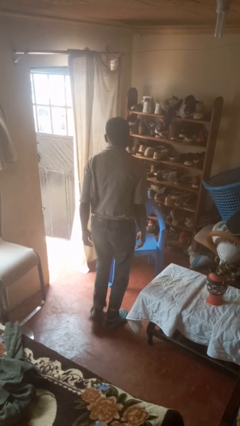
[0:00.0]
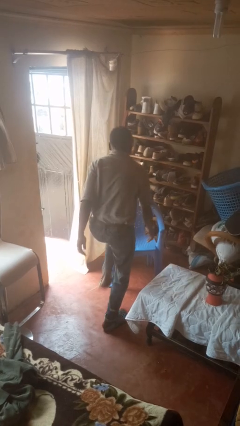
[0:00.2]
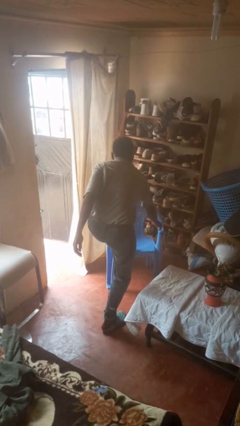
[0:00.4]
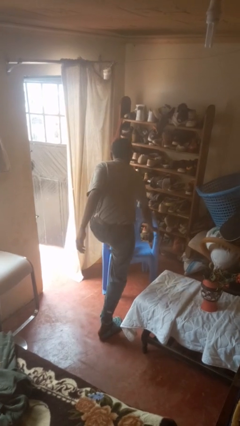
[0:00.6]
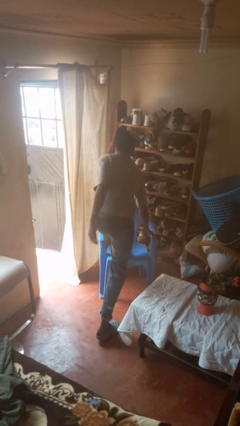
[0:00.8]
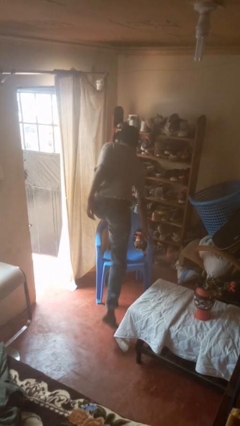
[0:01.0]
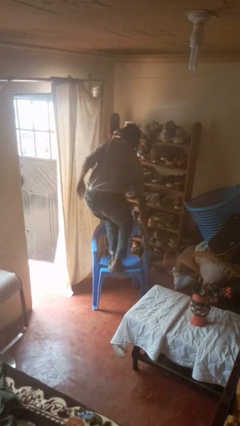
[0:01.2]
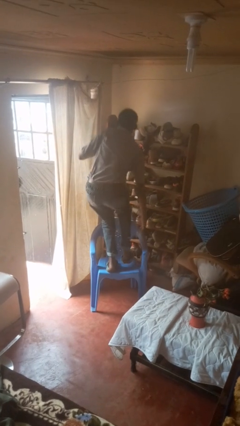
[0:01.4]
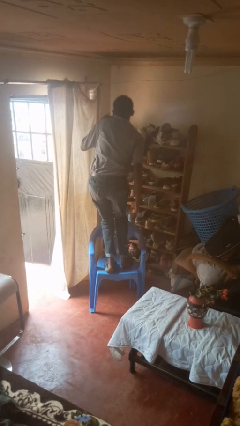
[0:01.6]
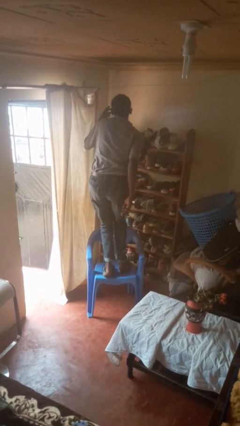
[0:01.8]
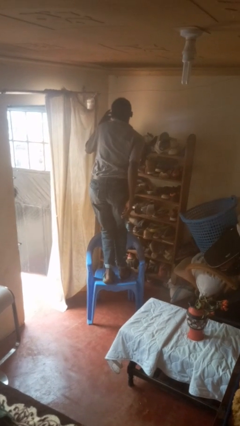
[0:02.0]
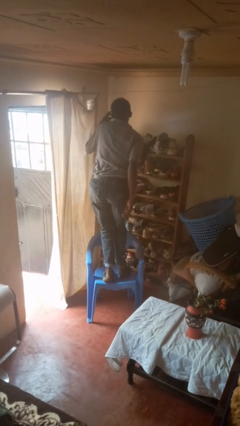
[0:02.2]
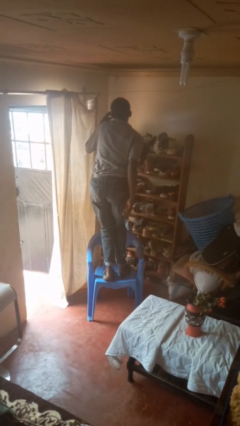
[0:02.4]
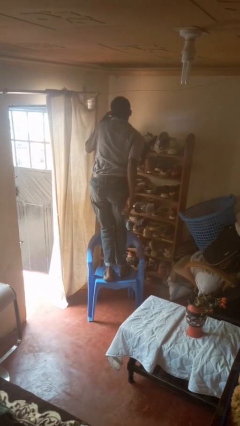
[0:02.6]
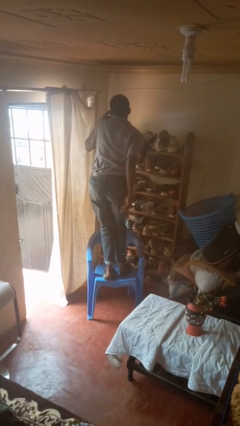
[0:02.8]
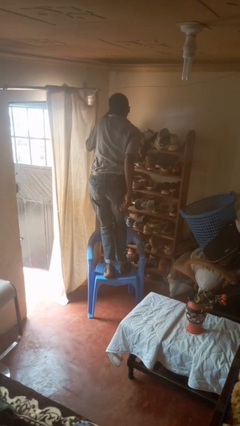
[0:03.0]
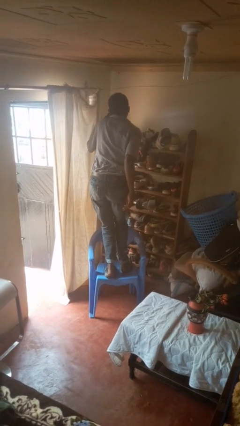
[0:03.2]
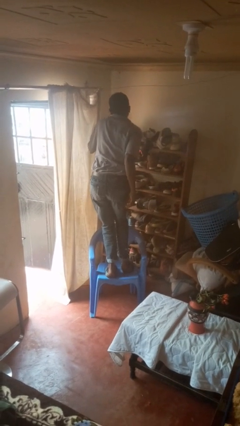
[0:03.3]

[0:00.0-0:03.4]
person climbs on chair

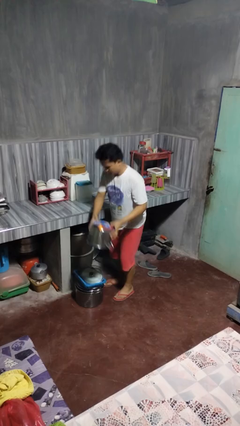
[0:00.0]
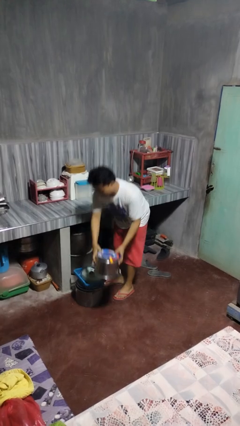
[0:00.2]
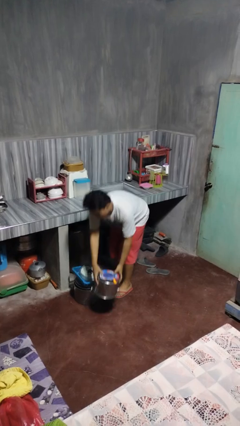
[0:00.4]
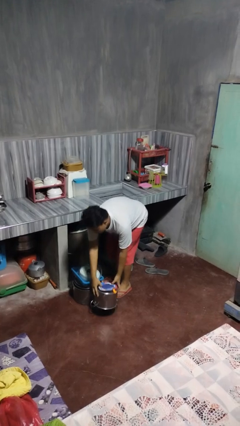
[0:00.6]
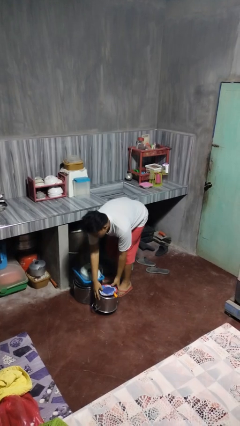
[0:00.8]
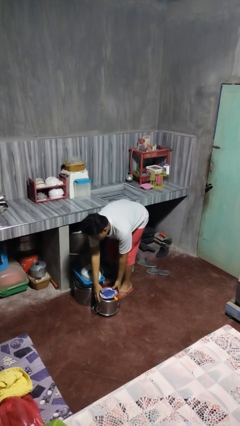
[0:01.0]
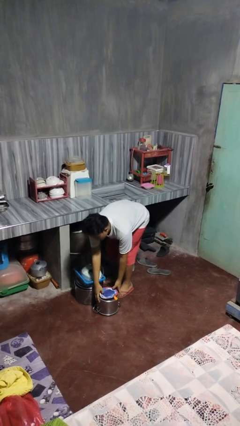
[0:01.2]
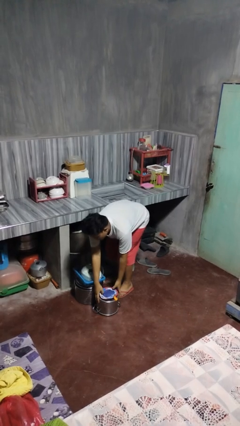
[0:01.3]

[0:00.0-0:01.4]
person puts down object on countertop

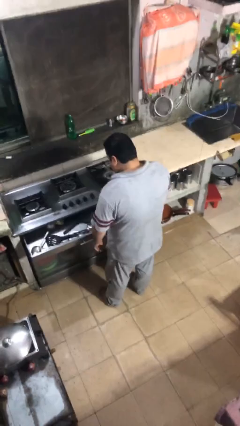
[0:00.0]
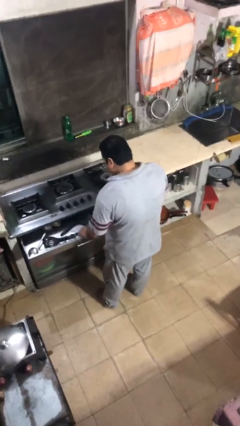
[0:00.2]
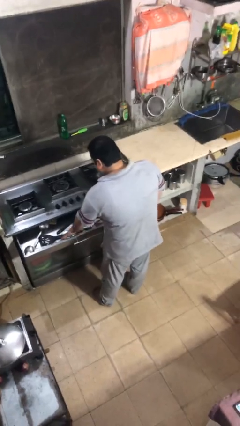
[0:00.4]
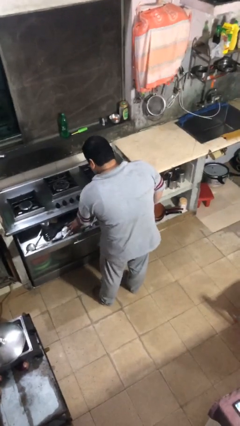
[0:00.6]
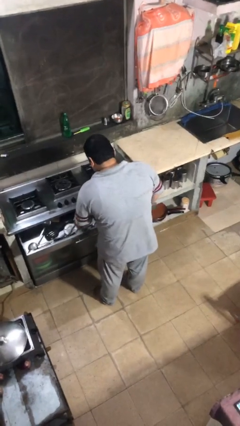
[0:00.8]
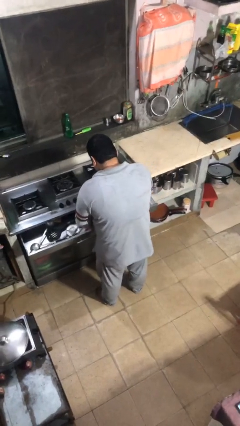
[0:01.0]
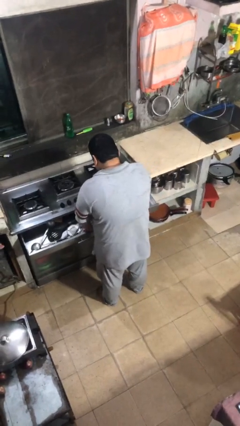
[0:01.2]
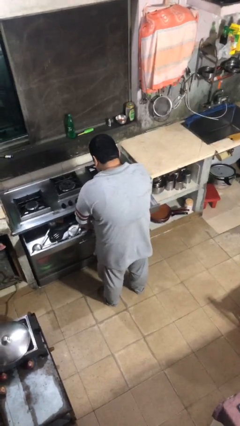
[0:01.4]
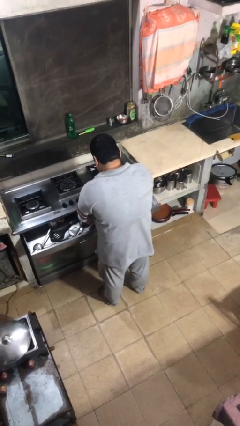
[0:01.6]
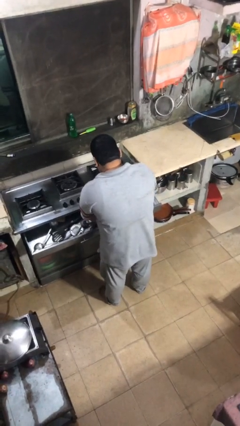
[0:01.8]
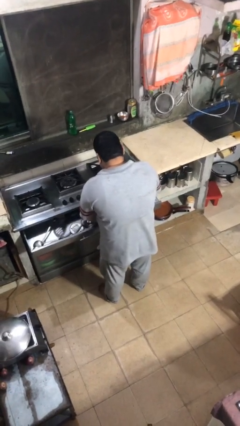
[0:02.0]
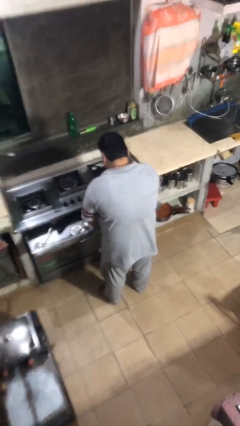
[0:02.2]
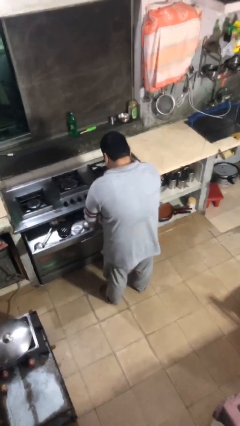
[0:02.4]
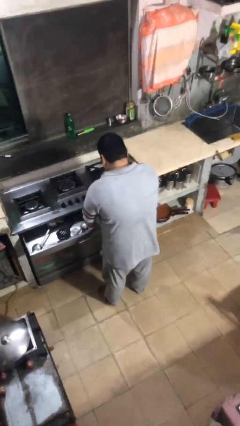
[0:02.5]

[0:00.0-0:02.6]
person searches in kitchen drawer

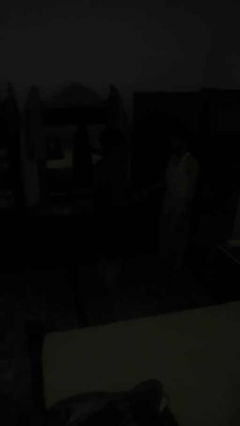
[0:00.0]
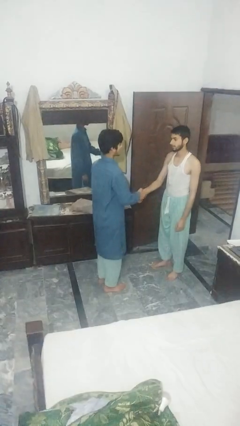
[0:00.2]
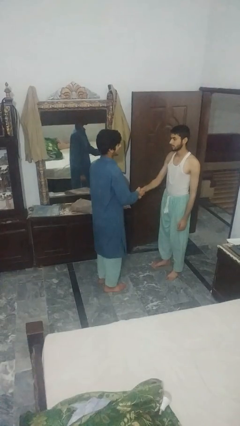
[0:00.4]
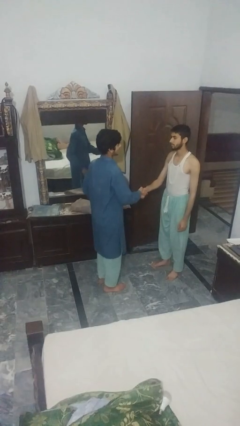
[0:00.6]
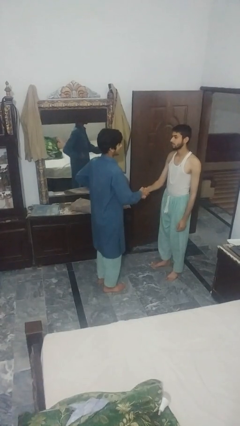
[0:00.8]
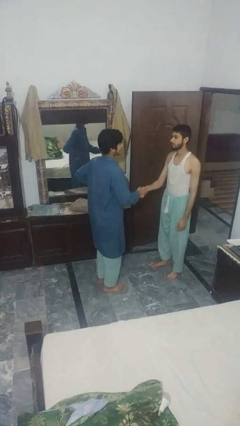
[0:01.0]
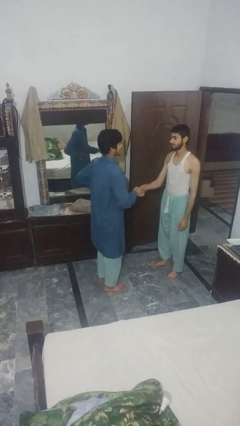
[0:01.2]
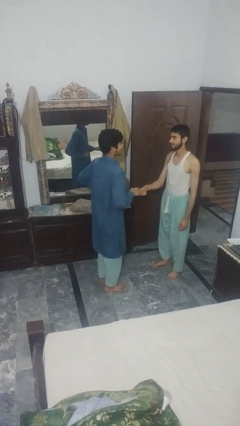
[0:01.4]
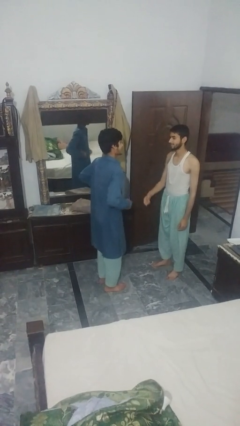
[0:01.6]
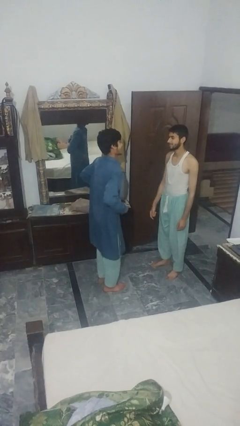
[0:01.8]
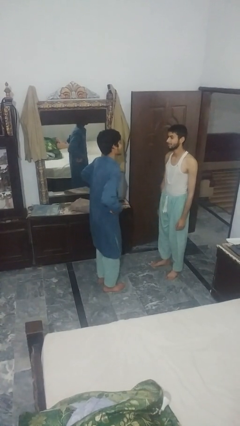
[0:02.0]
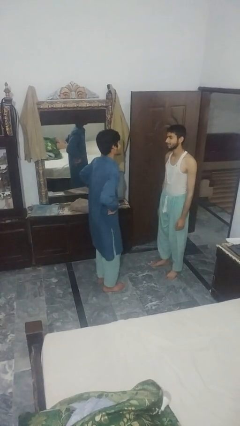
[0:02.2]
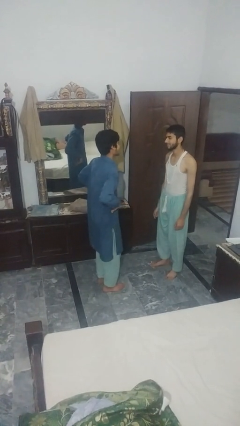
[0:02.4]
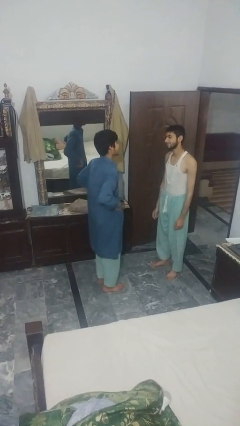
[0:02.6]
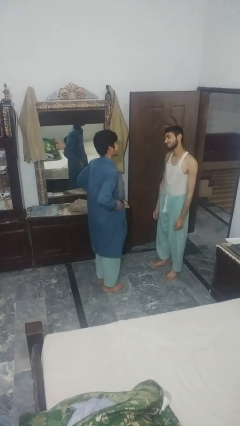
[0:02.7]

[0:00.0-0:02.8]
person highfives hand

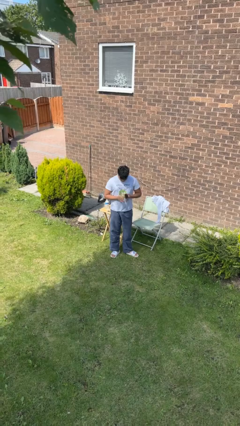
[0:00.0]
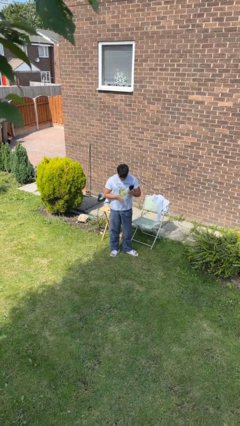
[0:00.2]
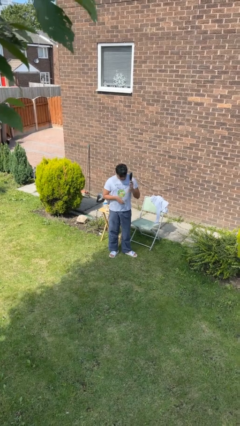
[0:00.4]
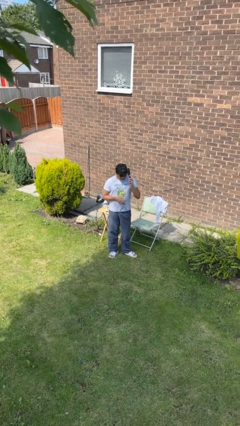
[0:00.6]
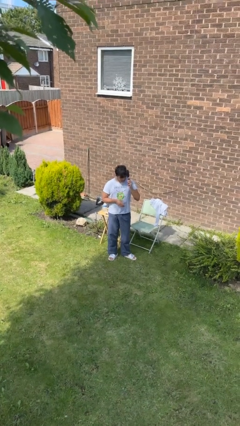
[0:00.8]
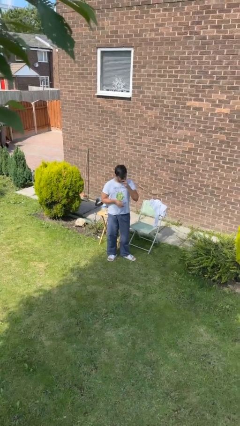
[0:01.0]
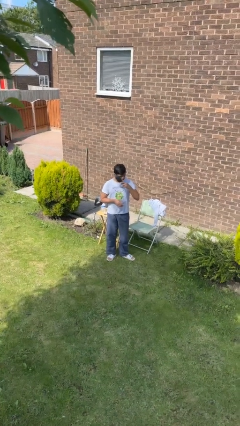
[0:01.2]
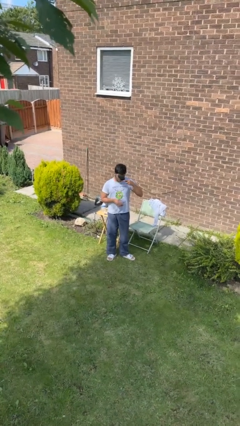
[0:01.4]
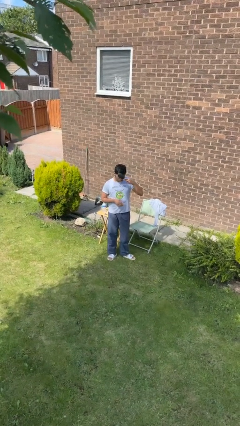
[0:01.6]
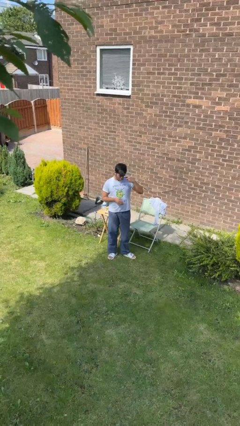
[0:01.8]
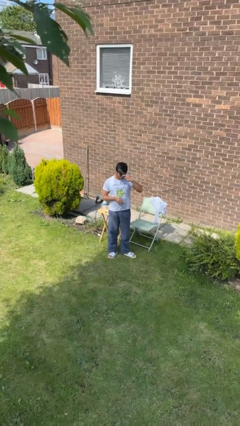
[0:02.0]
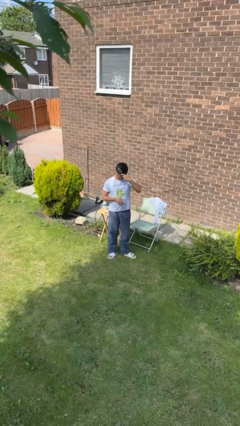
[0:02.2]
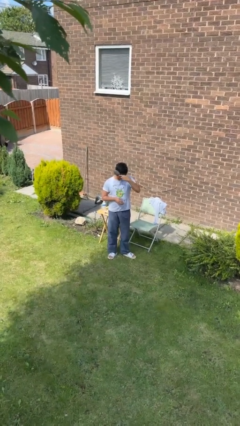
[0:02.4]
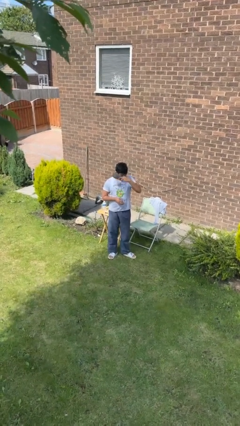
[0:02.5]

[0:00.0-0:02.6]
person brushes hair

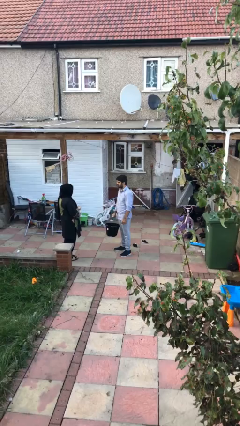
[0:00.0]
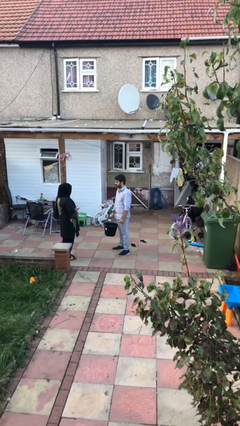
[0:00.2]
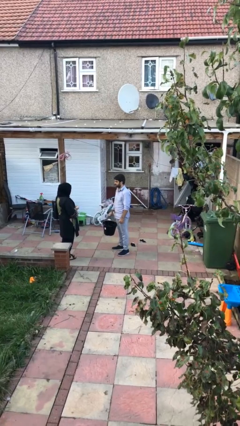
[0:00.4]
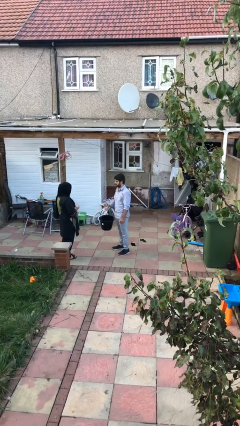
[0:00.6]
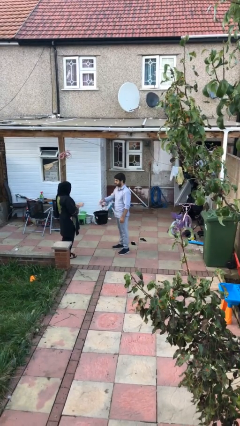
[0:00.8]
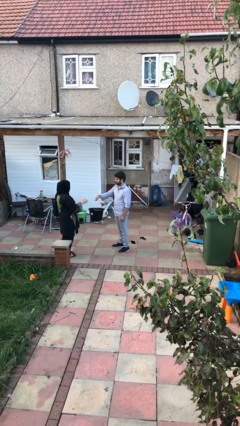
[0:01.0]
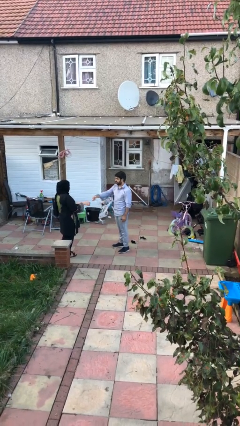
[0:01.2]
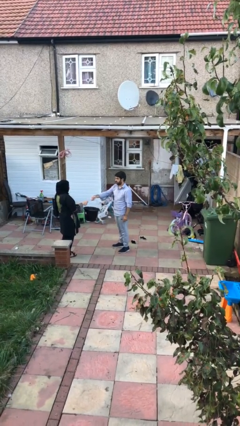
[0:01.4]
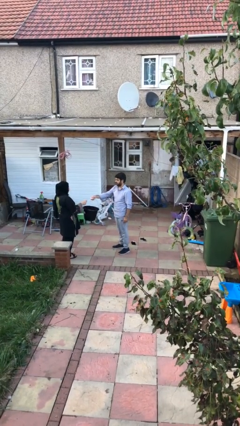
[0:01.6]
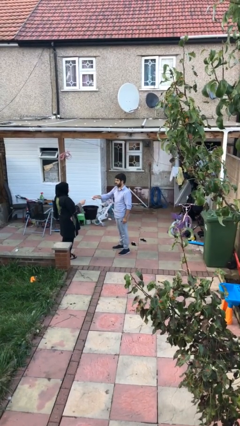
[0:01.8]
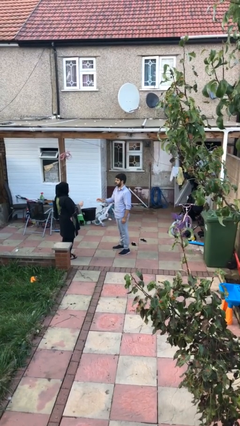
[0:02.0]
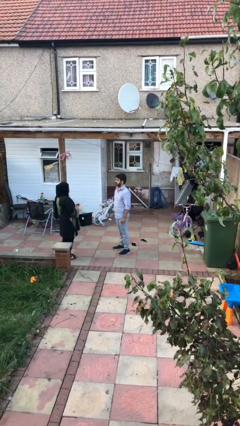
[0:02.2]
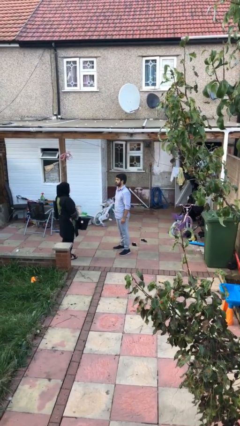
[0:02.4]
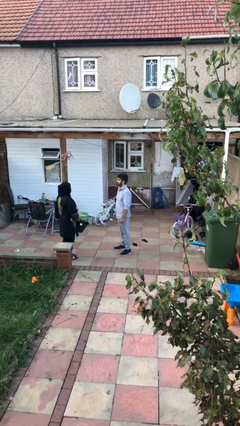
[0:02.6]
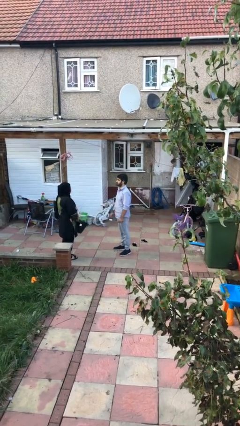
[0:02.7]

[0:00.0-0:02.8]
person transfers object to person

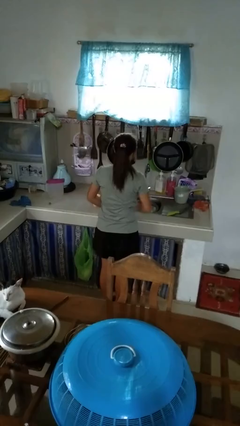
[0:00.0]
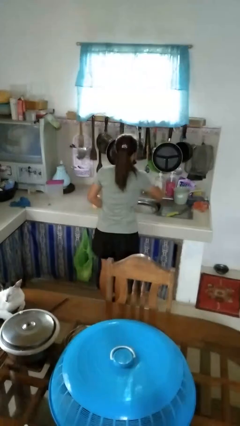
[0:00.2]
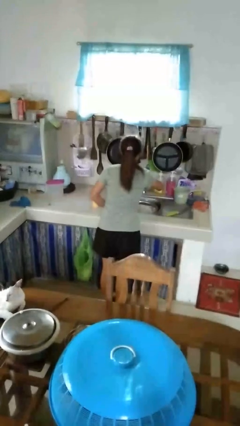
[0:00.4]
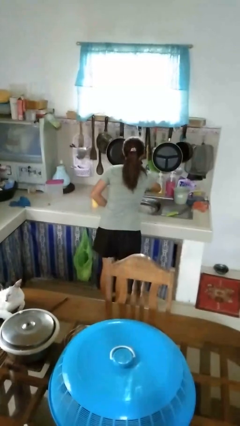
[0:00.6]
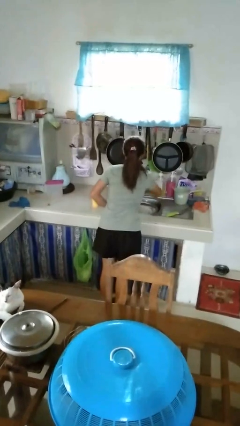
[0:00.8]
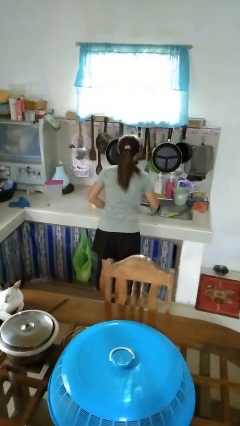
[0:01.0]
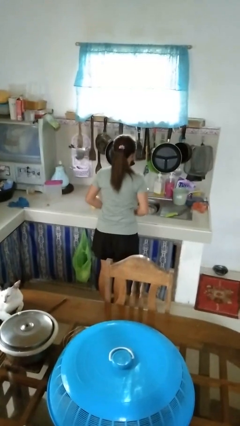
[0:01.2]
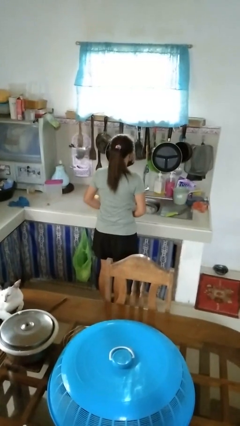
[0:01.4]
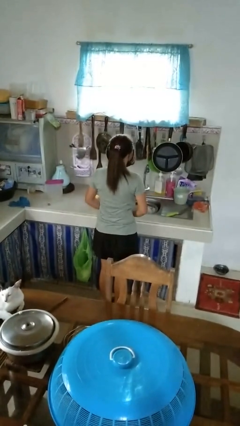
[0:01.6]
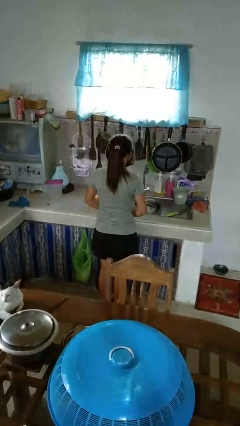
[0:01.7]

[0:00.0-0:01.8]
person turns off faucet
